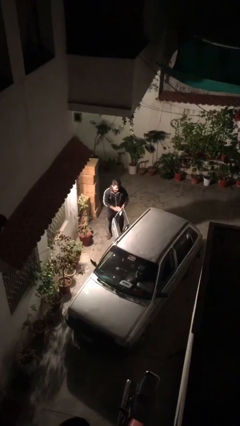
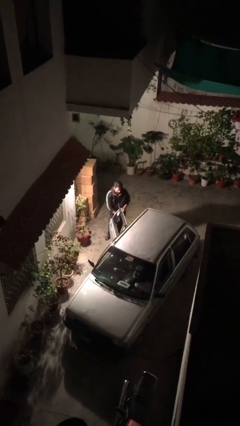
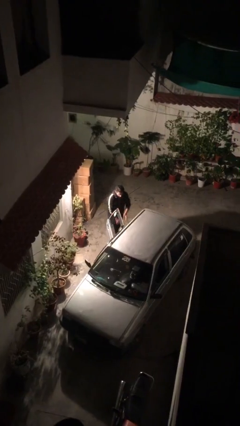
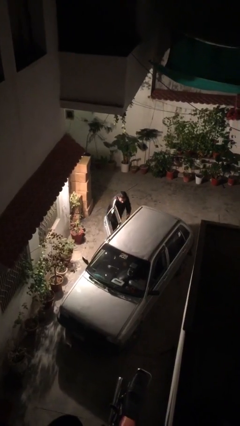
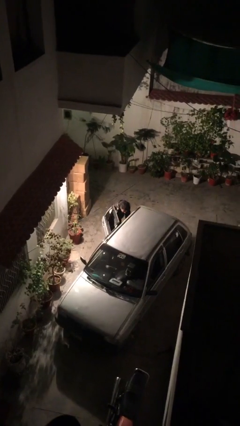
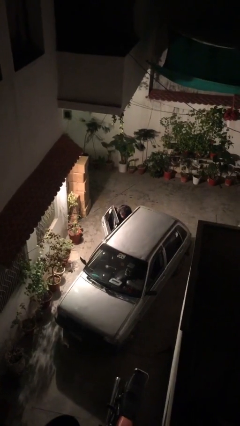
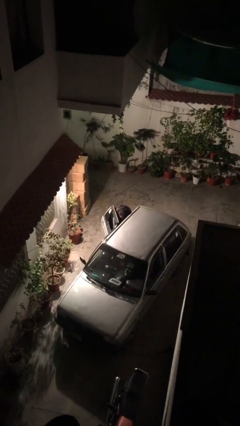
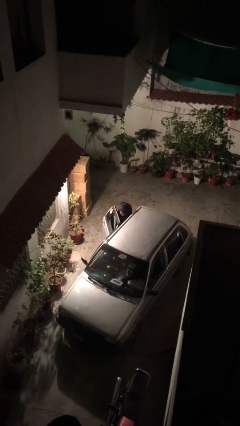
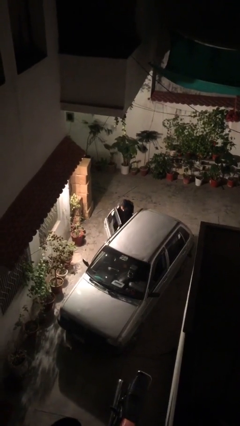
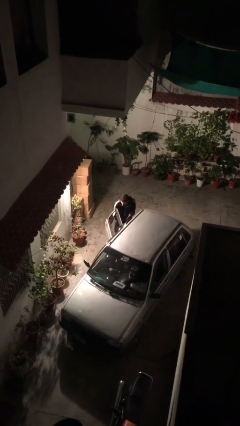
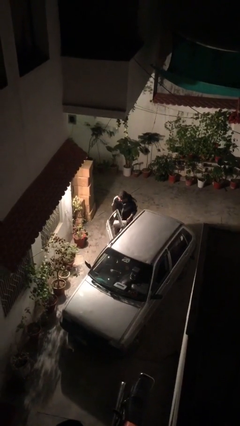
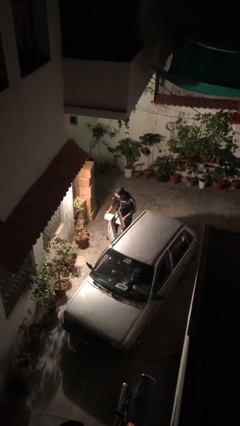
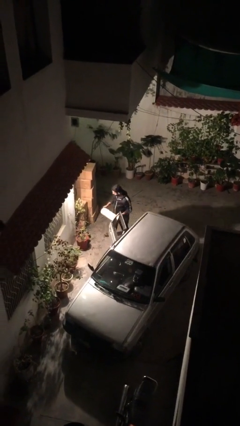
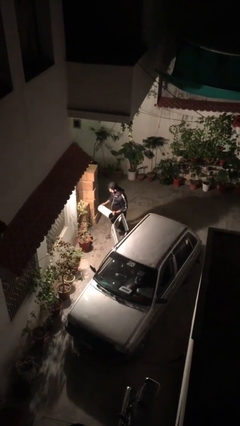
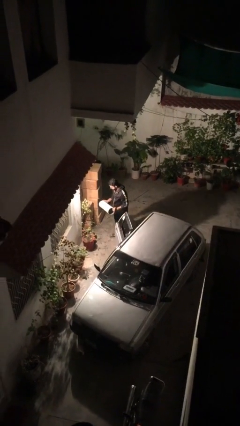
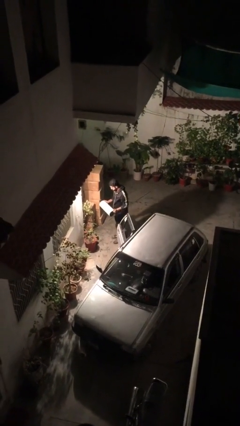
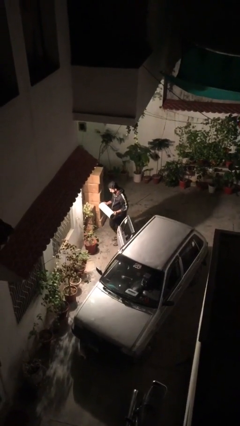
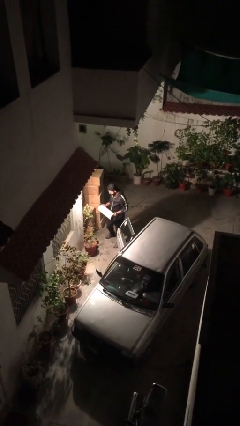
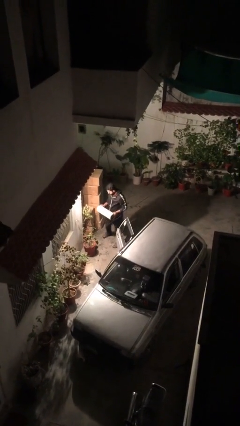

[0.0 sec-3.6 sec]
person unloads car

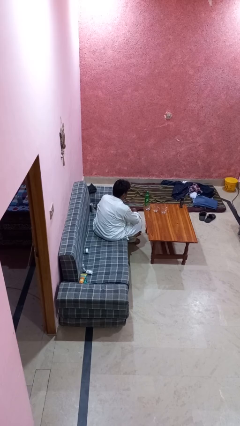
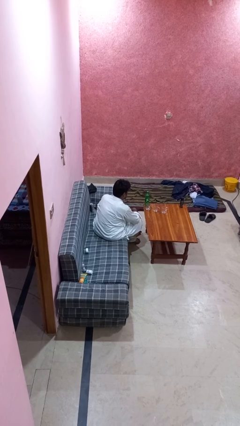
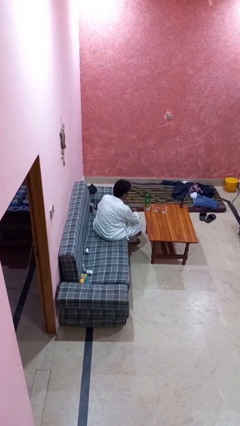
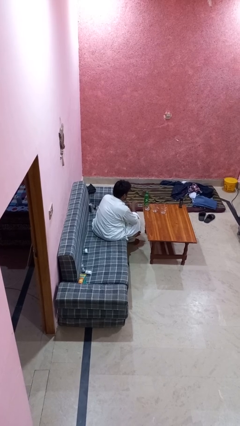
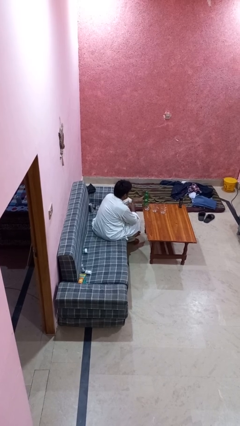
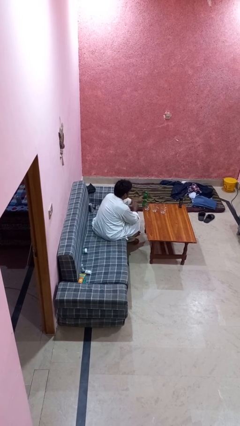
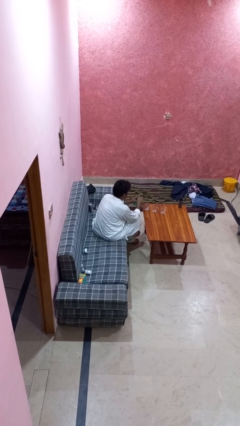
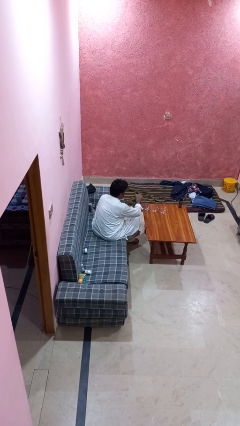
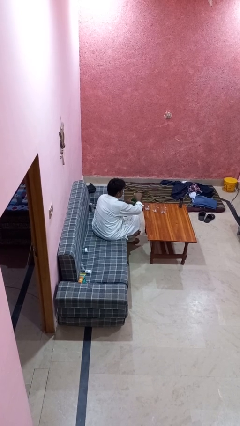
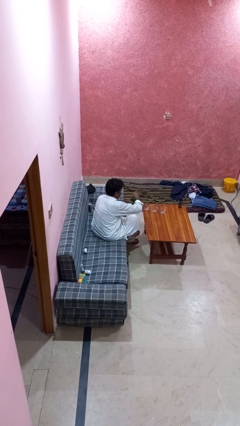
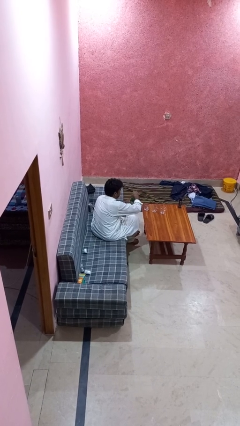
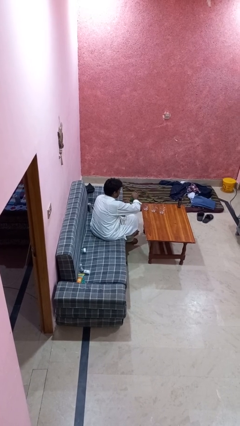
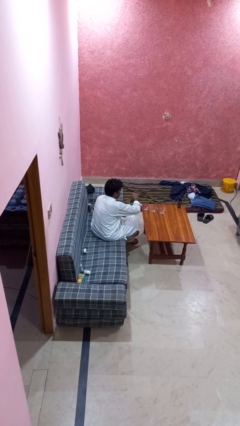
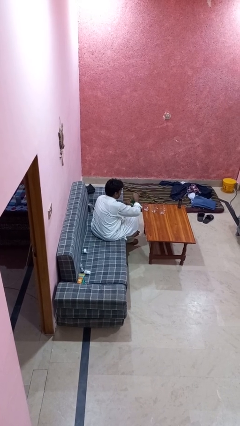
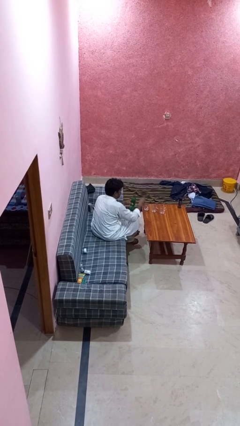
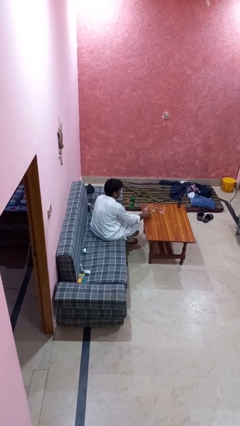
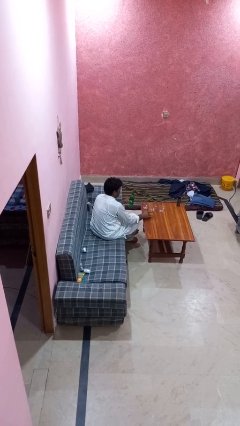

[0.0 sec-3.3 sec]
person unscrews lid from bottle

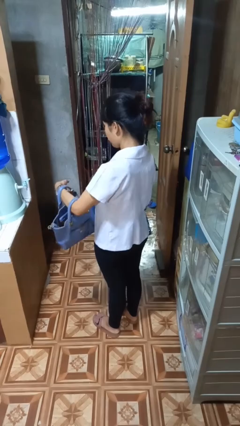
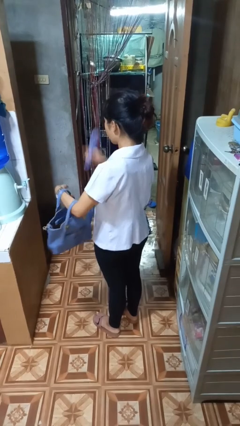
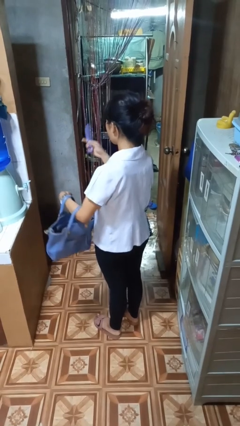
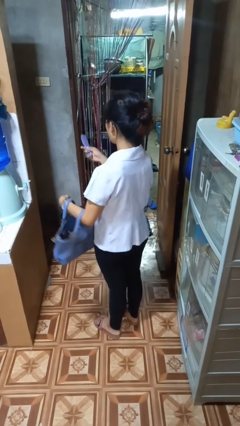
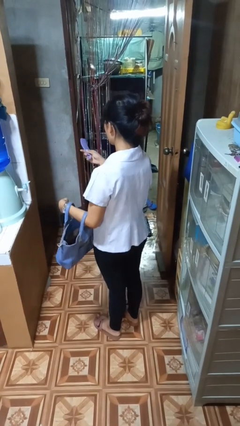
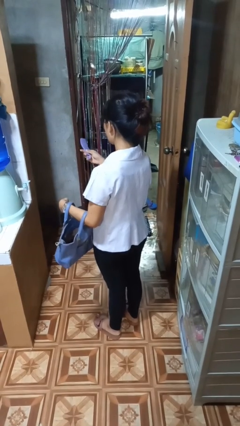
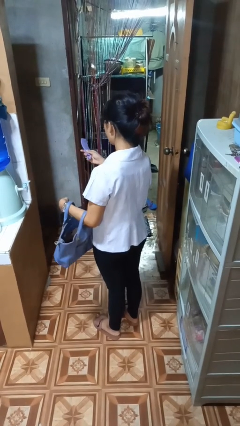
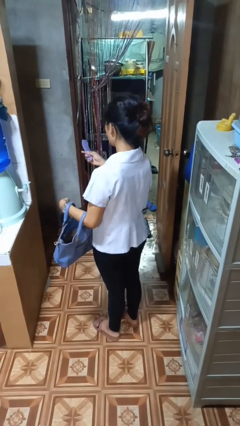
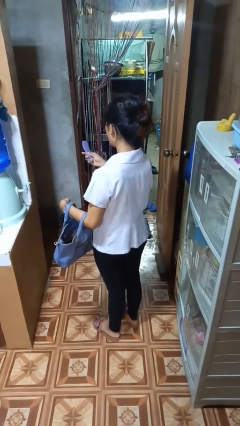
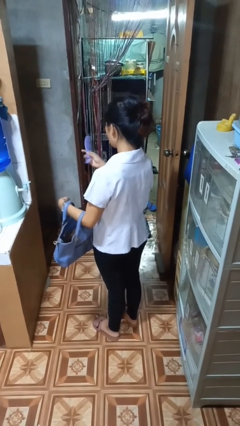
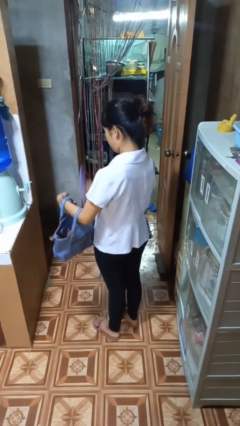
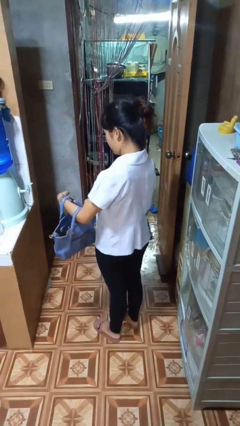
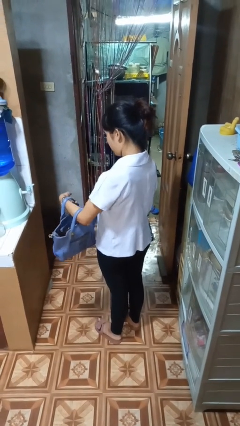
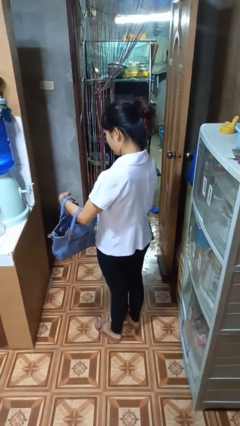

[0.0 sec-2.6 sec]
person takes object from purse

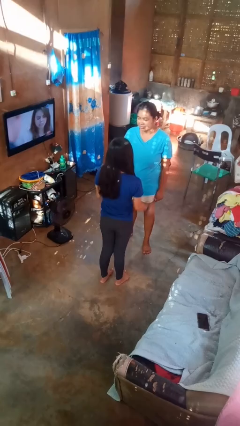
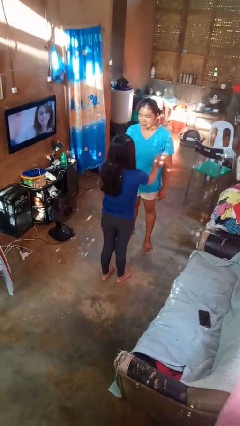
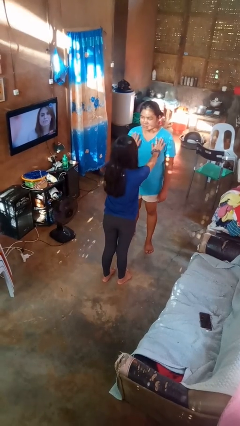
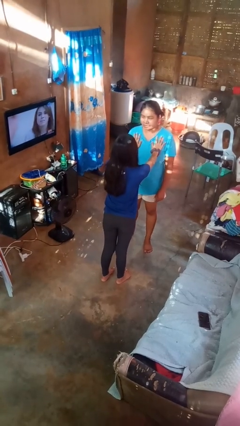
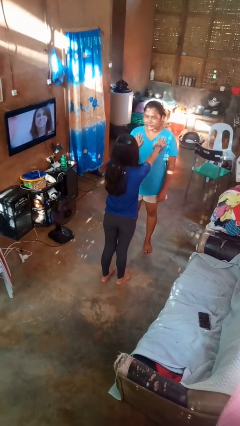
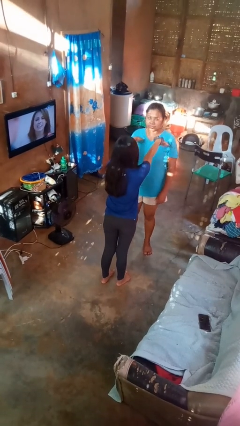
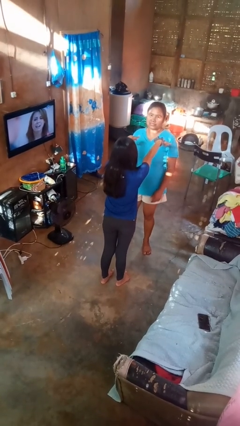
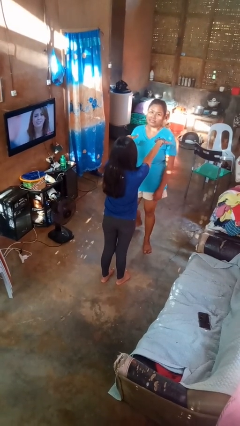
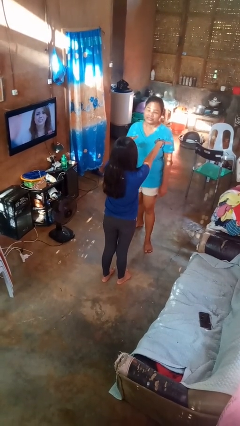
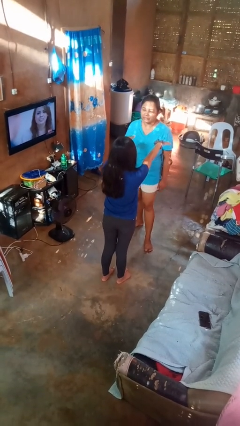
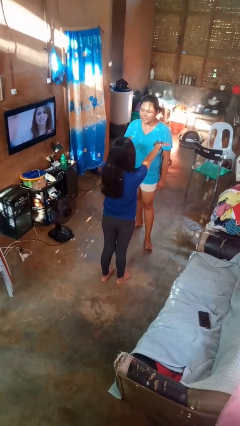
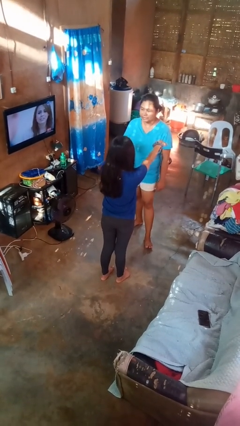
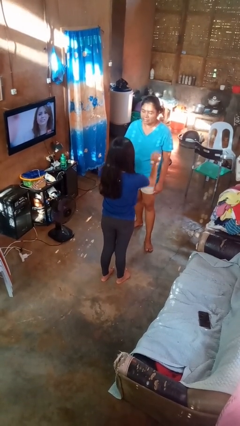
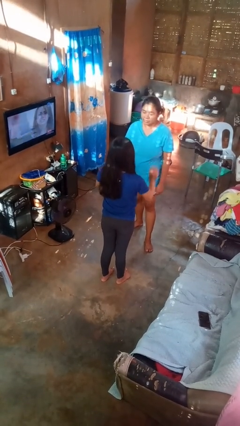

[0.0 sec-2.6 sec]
person shoves person

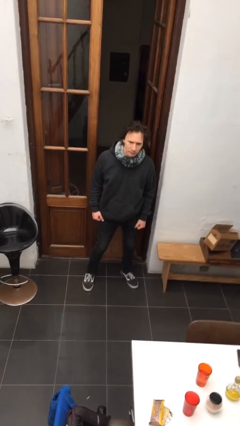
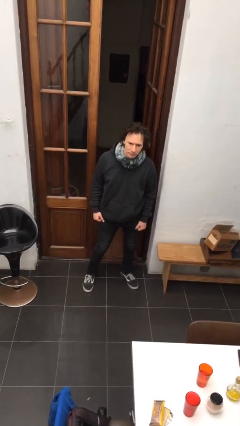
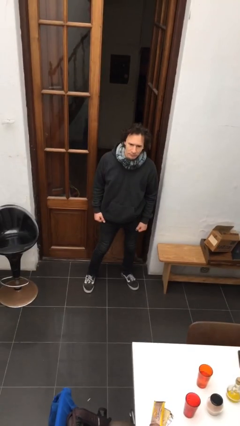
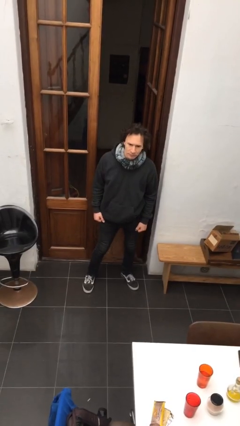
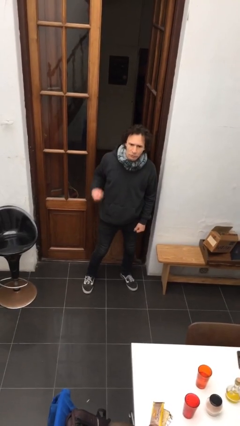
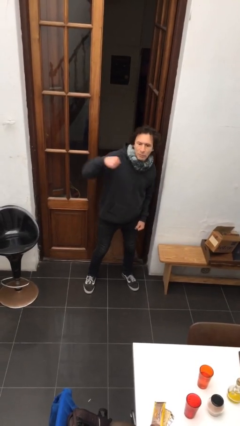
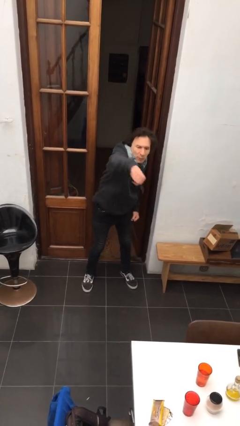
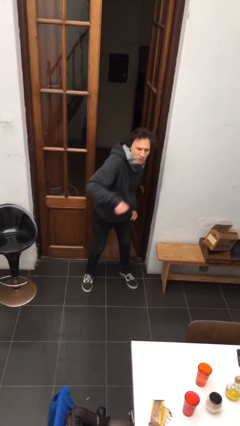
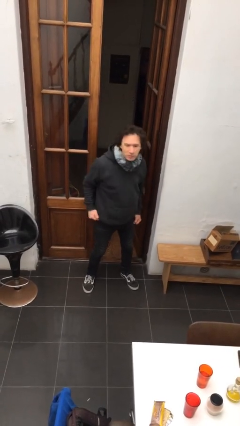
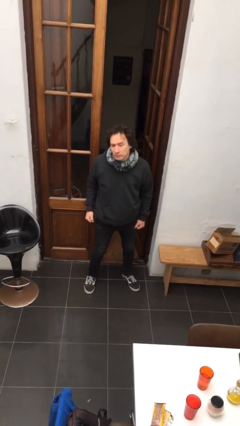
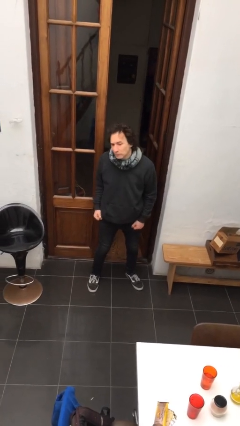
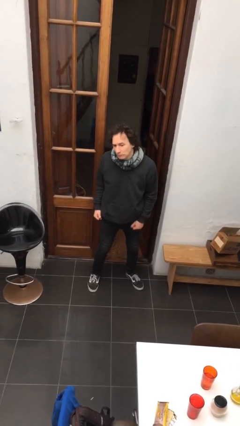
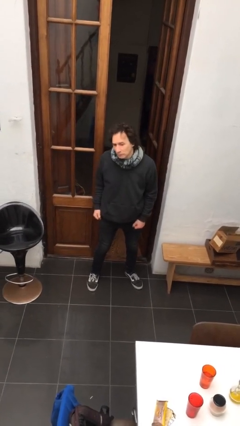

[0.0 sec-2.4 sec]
person punches

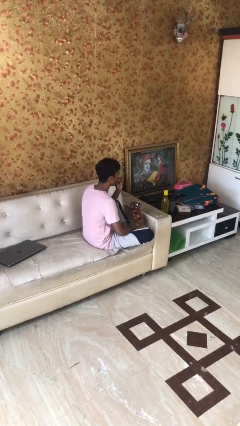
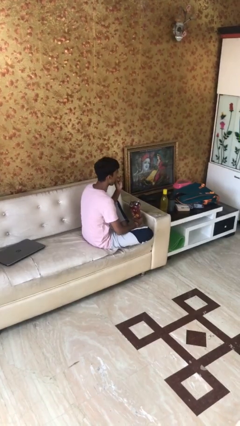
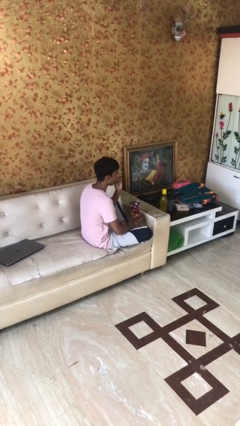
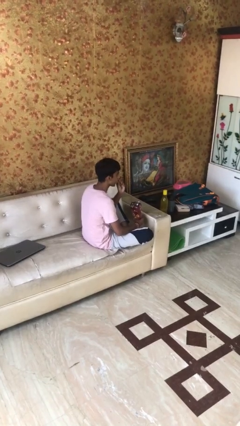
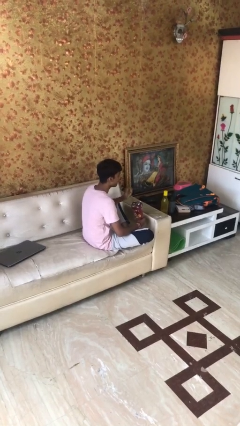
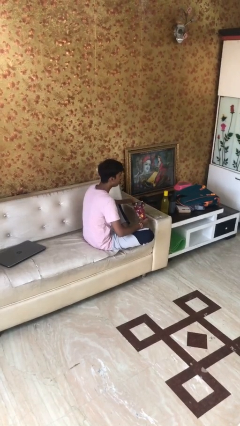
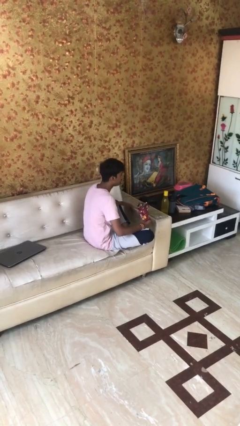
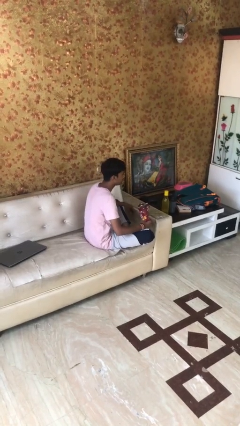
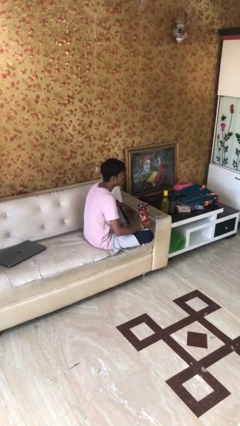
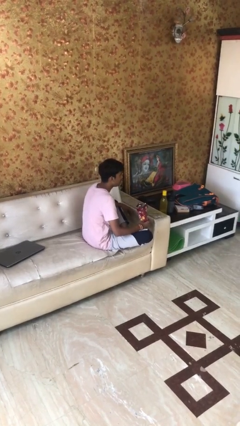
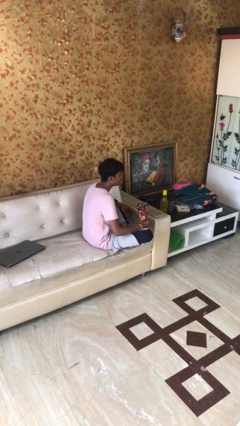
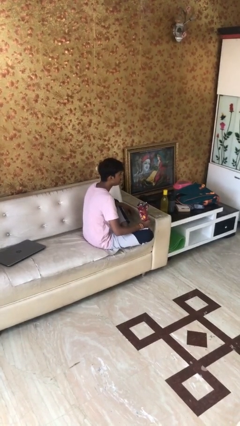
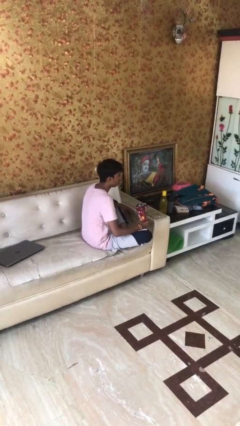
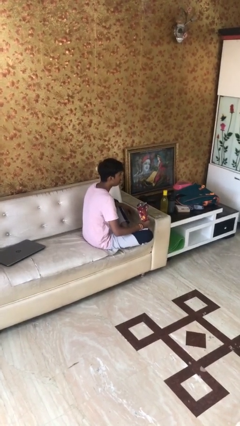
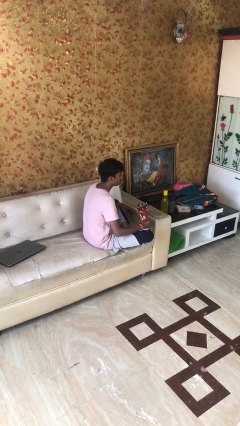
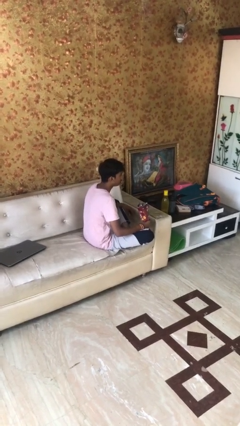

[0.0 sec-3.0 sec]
person eats snack from bag
